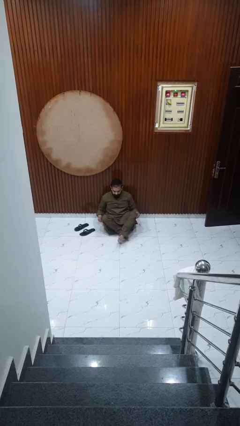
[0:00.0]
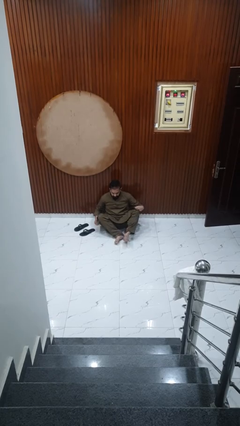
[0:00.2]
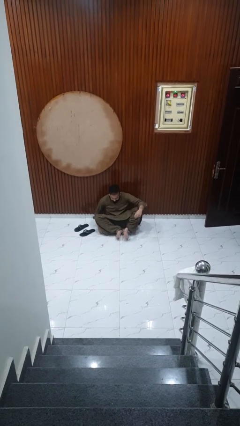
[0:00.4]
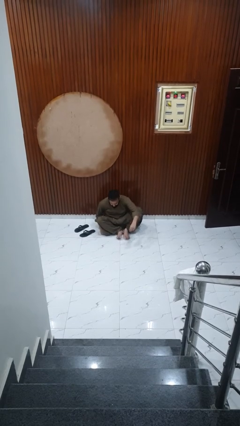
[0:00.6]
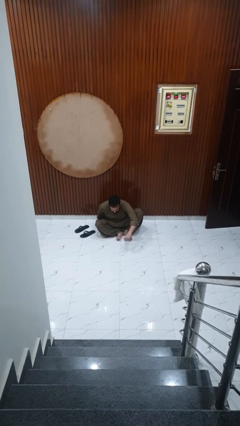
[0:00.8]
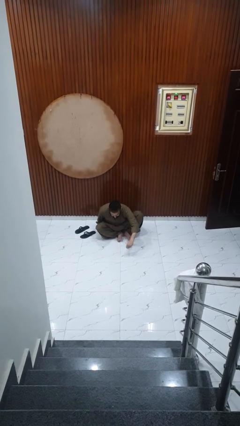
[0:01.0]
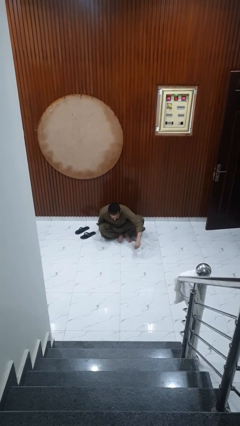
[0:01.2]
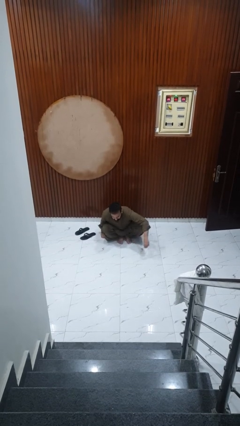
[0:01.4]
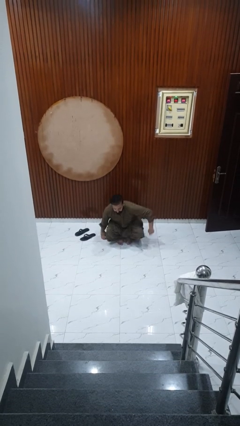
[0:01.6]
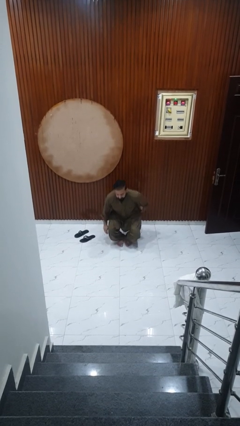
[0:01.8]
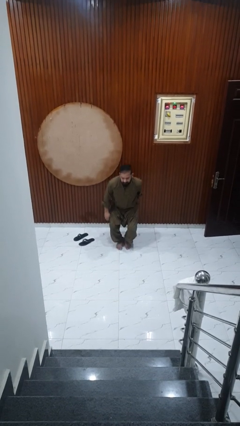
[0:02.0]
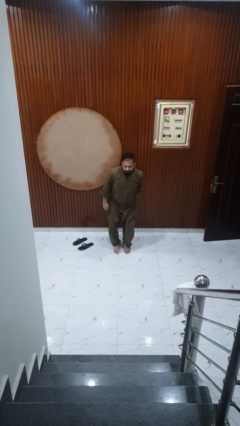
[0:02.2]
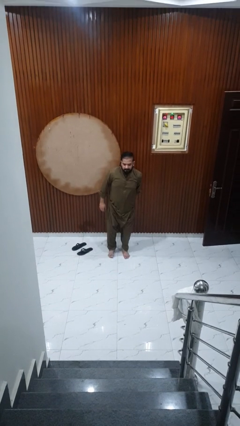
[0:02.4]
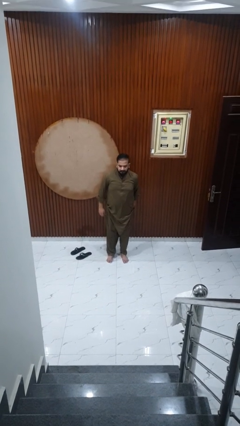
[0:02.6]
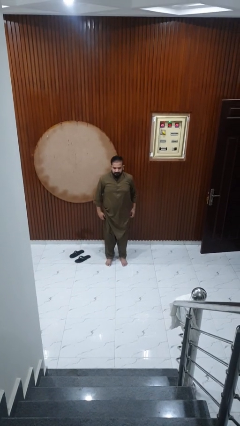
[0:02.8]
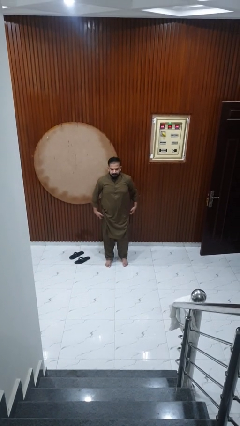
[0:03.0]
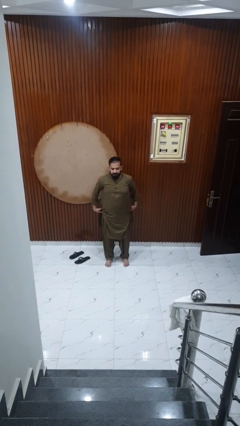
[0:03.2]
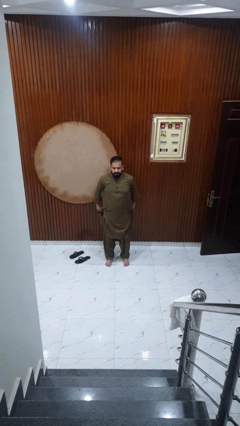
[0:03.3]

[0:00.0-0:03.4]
person stands up from floor

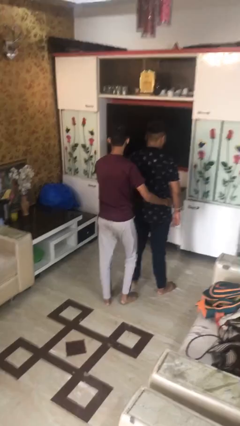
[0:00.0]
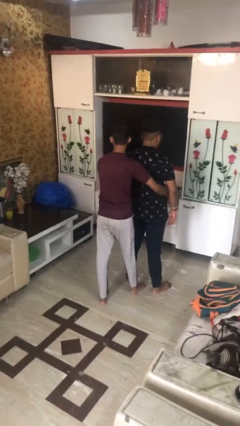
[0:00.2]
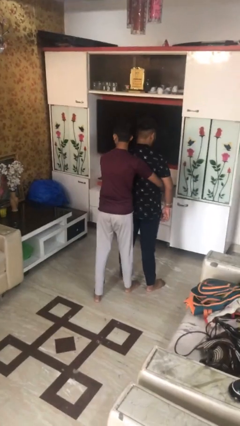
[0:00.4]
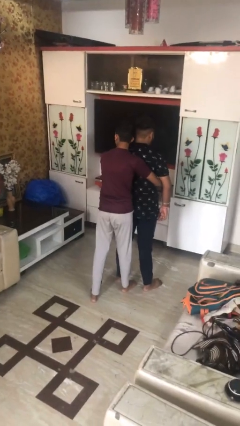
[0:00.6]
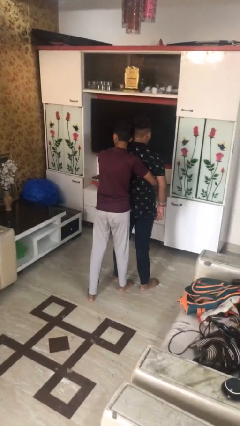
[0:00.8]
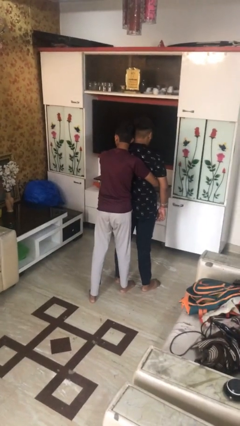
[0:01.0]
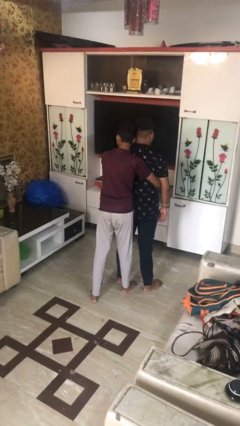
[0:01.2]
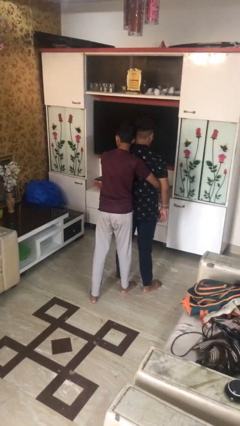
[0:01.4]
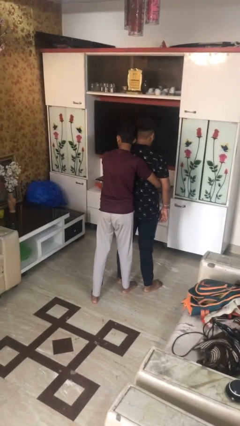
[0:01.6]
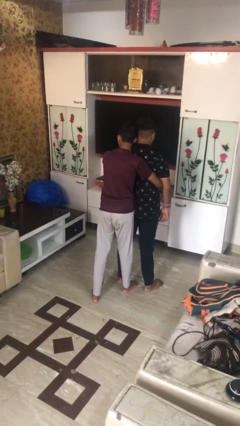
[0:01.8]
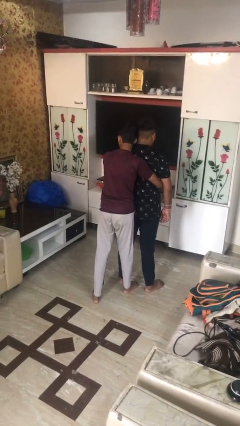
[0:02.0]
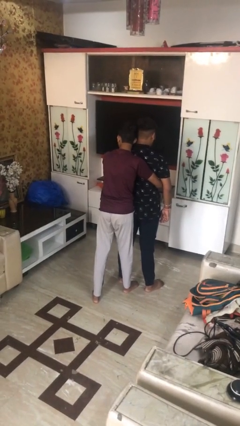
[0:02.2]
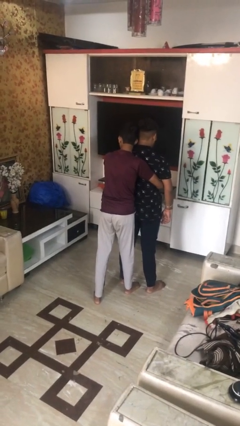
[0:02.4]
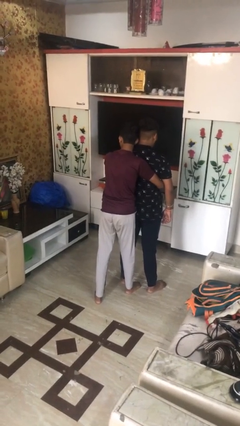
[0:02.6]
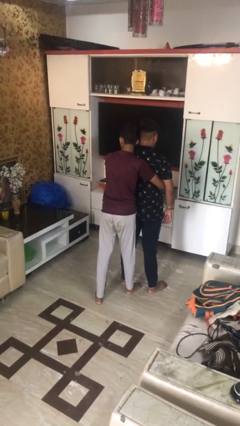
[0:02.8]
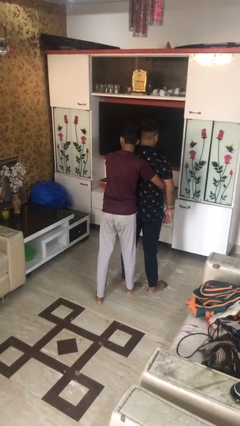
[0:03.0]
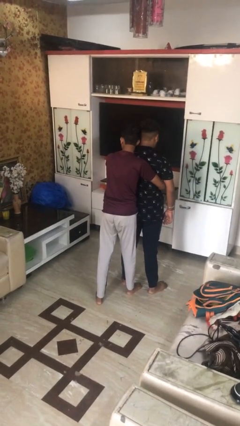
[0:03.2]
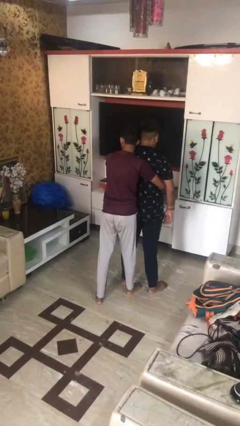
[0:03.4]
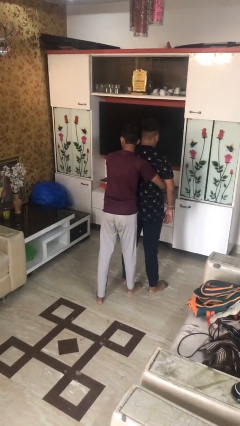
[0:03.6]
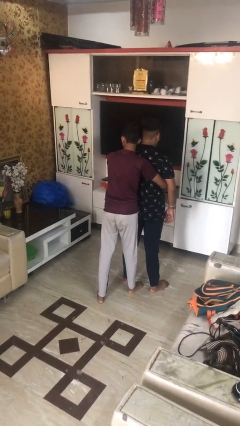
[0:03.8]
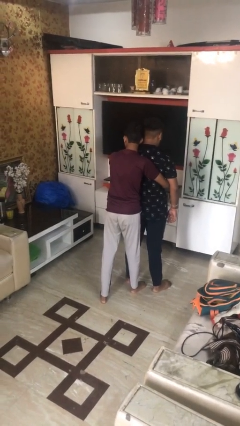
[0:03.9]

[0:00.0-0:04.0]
person hugs person from behind

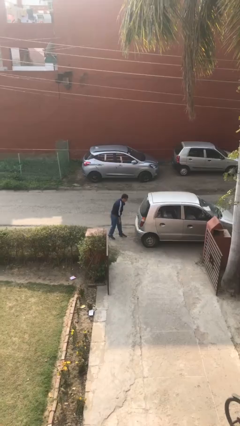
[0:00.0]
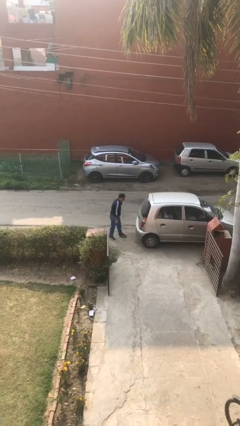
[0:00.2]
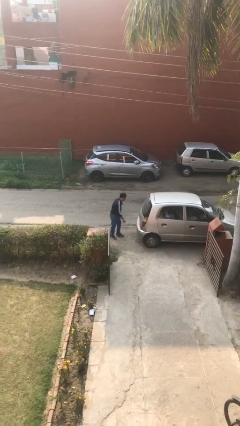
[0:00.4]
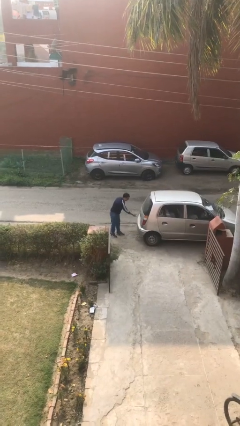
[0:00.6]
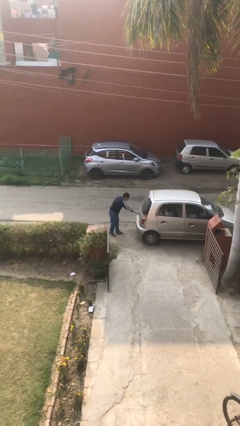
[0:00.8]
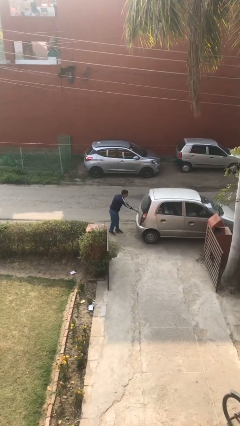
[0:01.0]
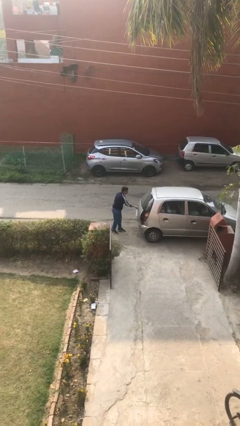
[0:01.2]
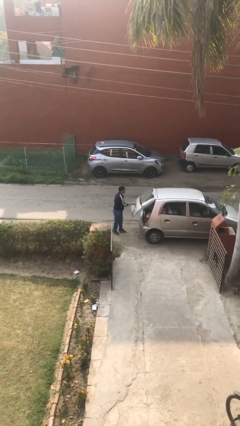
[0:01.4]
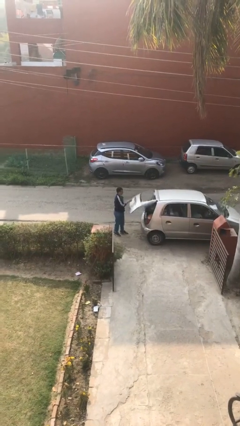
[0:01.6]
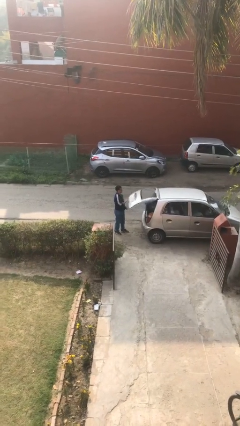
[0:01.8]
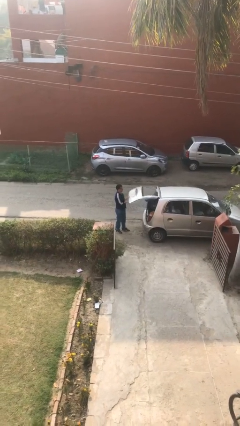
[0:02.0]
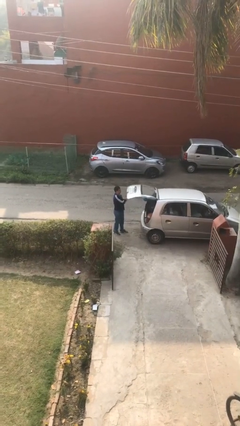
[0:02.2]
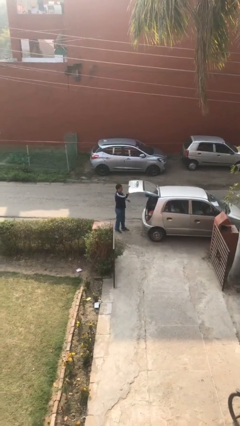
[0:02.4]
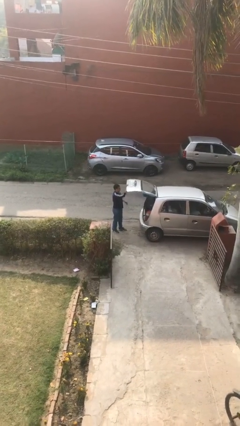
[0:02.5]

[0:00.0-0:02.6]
person opens car trunk

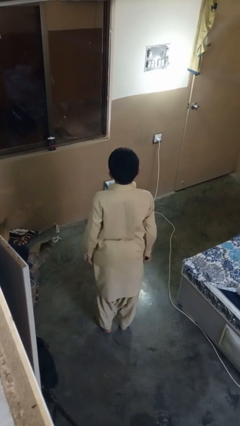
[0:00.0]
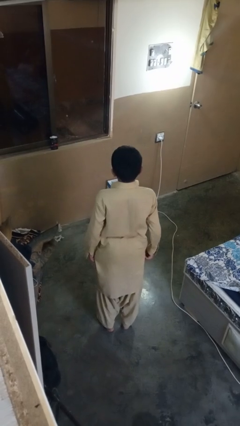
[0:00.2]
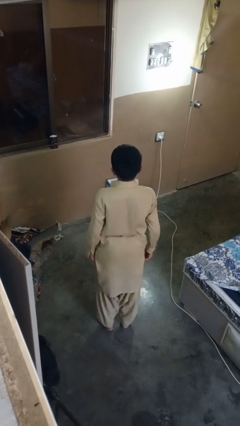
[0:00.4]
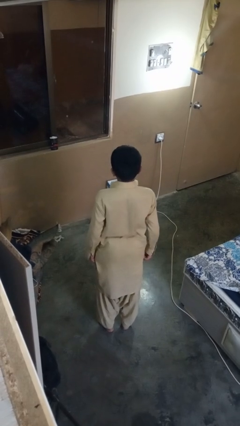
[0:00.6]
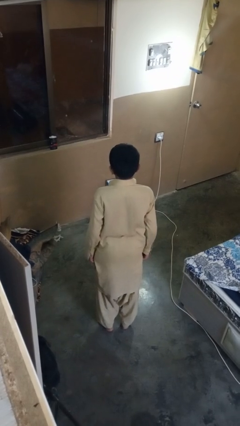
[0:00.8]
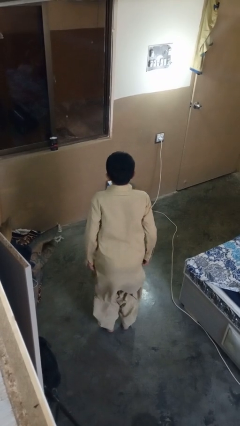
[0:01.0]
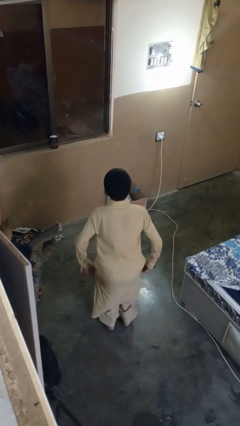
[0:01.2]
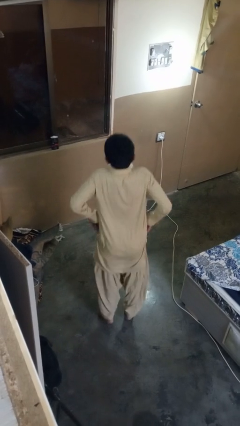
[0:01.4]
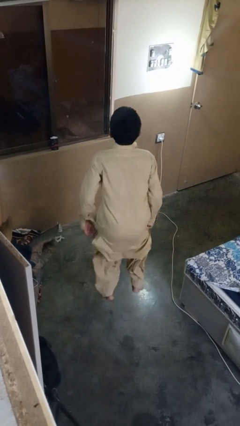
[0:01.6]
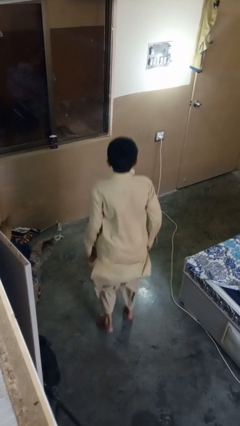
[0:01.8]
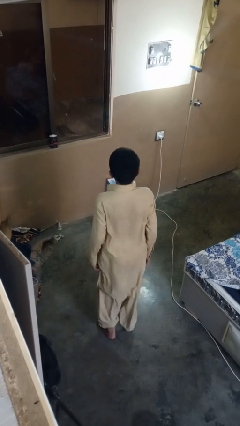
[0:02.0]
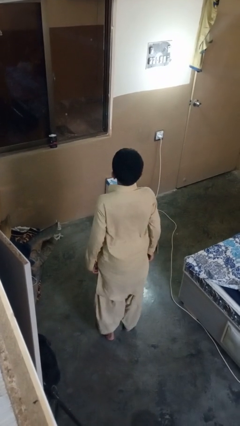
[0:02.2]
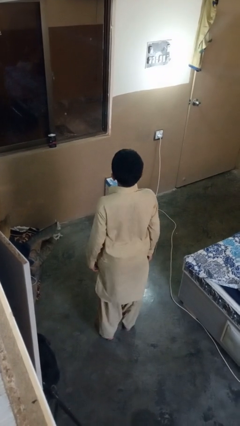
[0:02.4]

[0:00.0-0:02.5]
person jumps

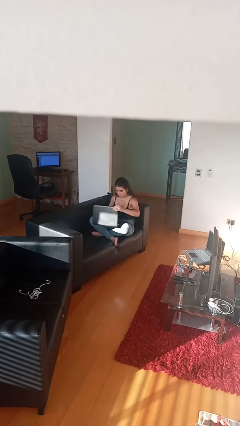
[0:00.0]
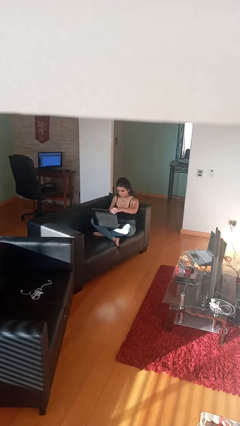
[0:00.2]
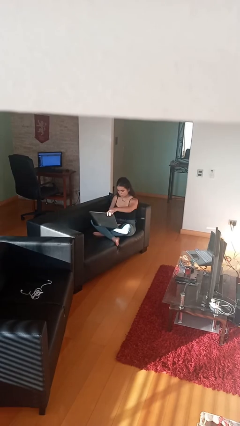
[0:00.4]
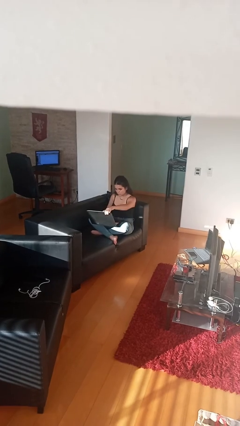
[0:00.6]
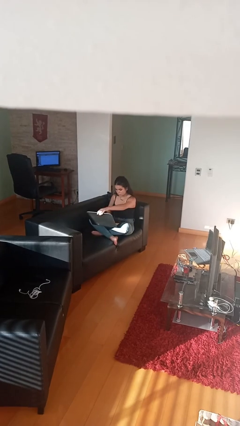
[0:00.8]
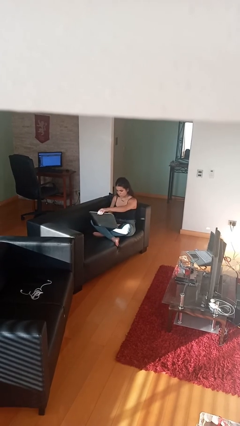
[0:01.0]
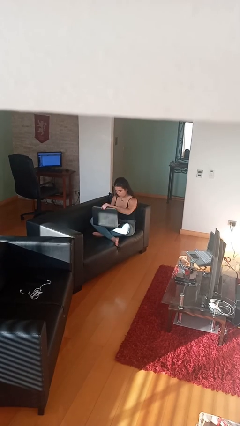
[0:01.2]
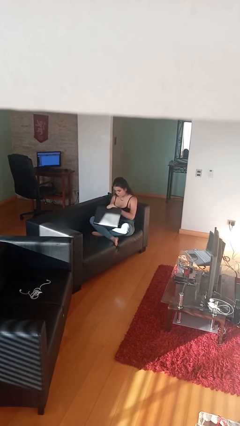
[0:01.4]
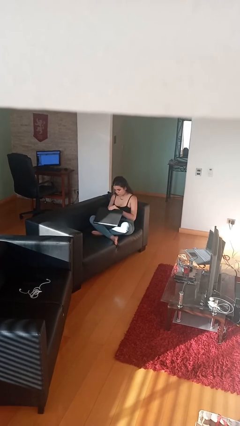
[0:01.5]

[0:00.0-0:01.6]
person interacts with laptop

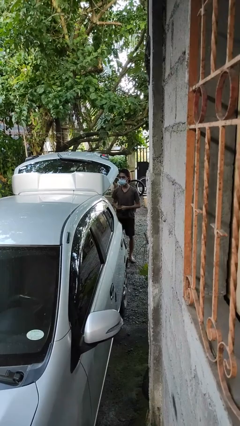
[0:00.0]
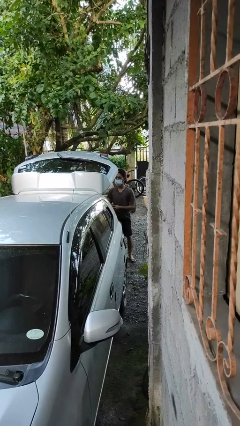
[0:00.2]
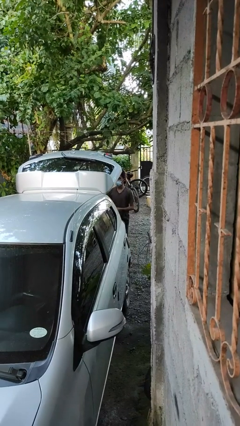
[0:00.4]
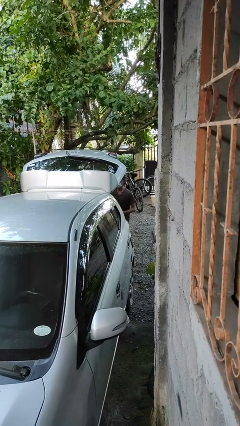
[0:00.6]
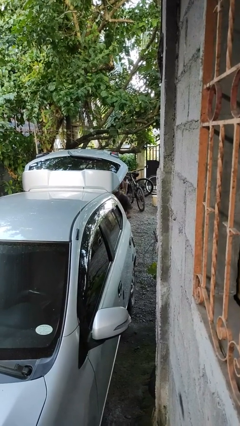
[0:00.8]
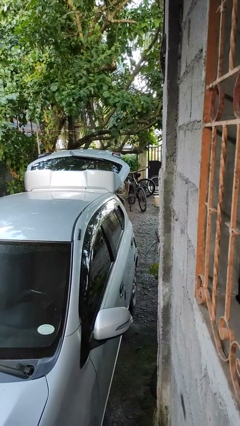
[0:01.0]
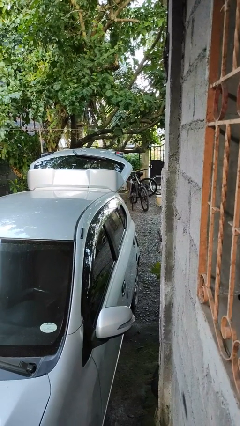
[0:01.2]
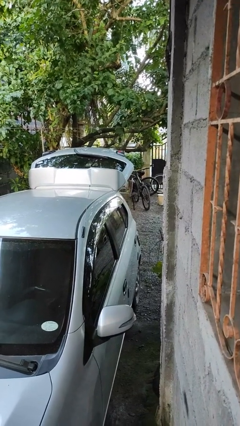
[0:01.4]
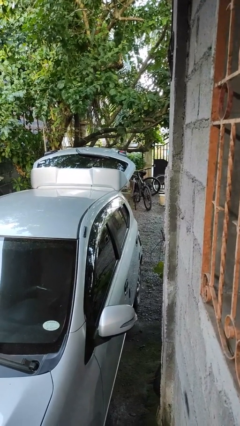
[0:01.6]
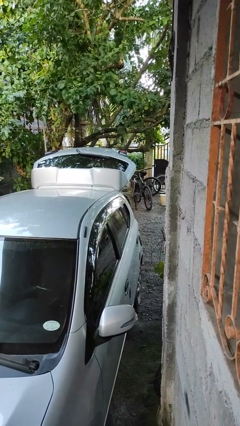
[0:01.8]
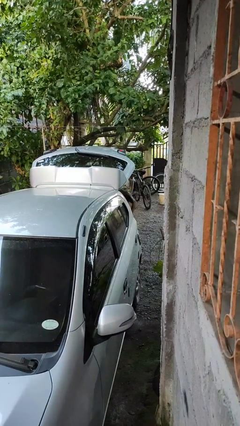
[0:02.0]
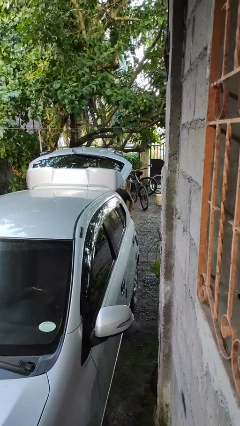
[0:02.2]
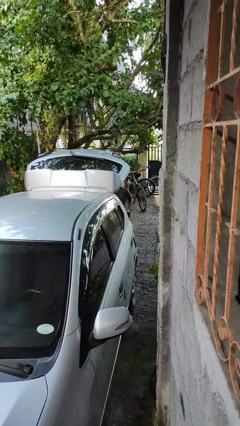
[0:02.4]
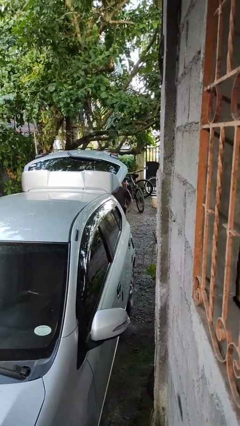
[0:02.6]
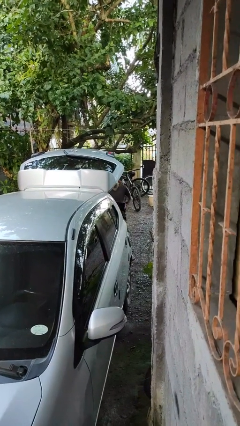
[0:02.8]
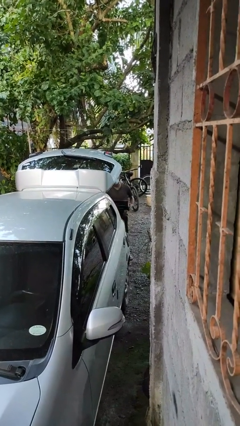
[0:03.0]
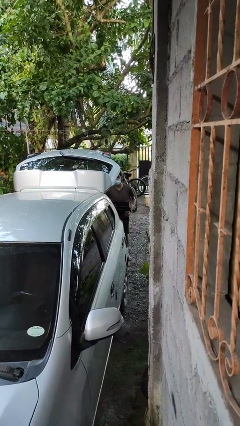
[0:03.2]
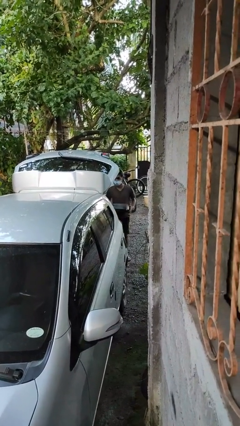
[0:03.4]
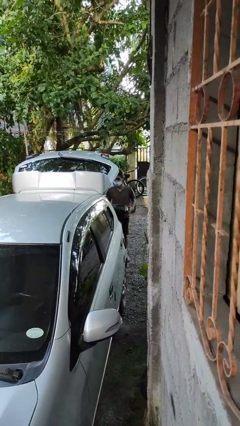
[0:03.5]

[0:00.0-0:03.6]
person unloads car

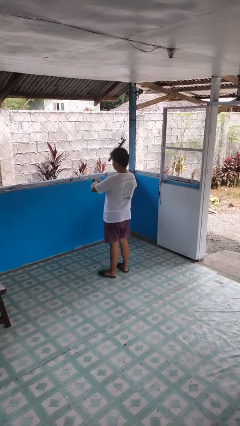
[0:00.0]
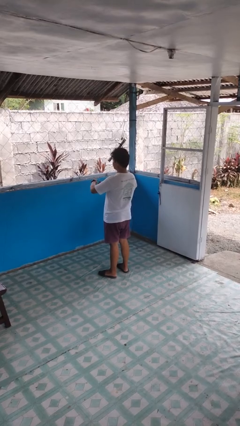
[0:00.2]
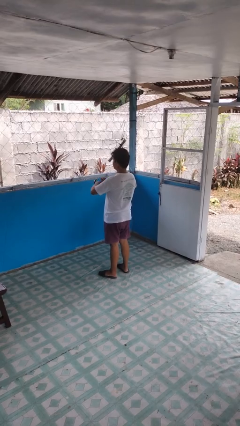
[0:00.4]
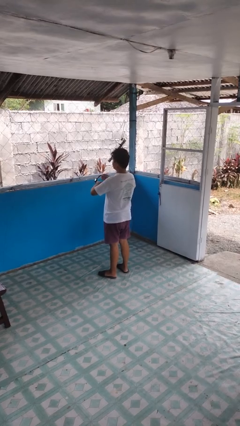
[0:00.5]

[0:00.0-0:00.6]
person takes off wristwatch
